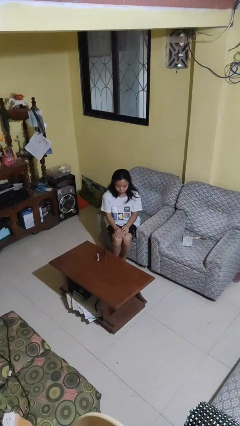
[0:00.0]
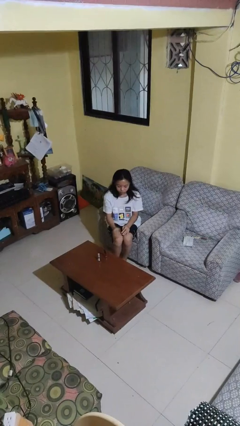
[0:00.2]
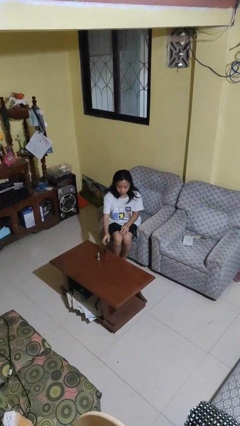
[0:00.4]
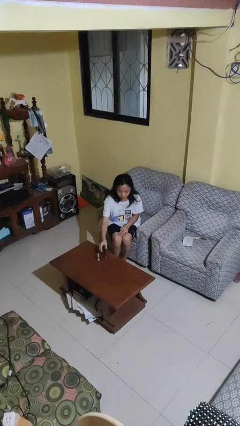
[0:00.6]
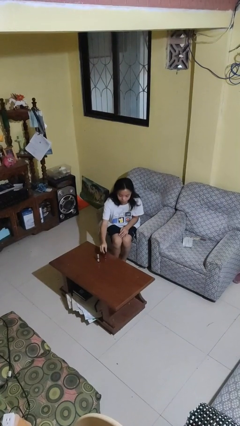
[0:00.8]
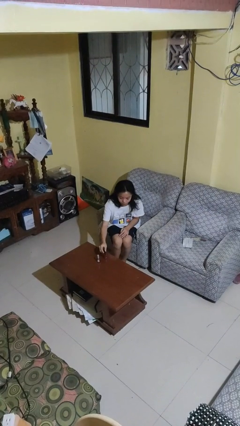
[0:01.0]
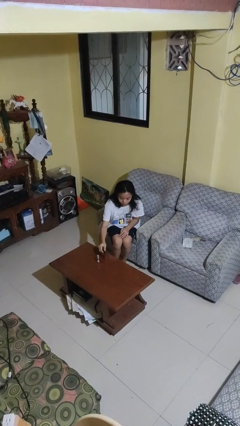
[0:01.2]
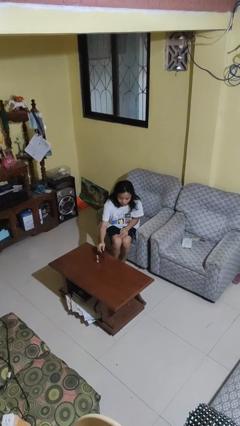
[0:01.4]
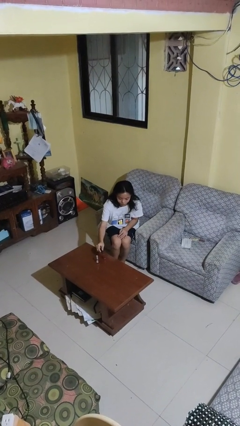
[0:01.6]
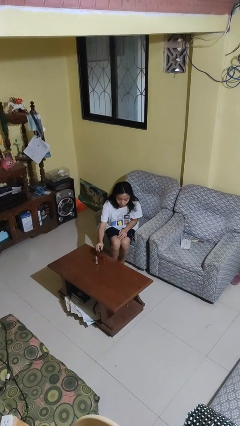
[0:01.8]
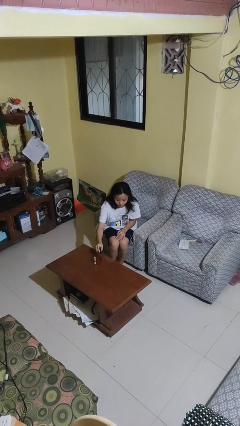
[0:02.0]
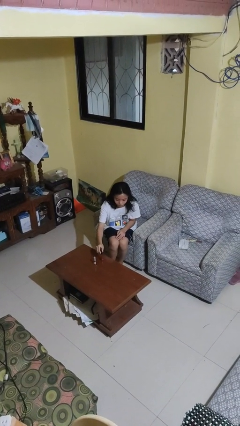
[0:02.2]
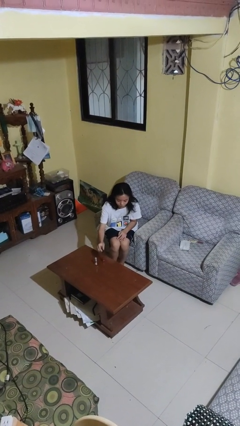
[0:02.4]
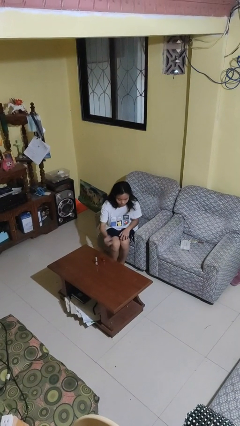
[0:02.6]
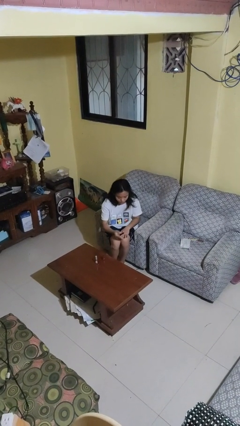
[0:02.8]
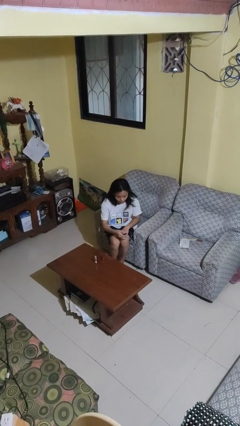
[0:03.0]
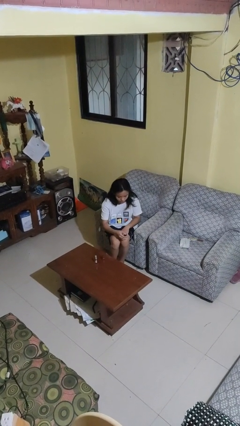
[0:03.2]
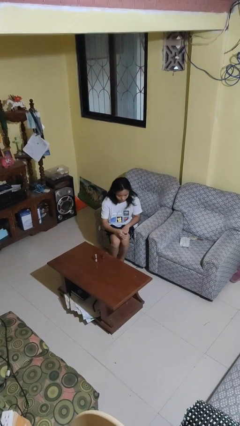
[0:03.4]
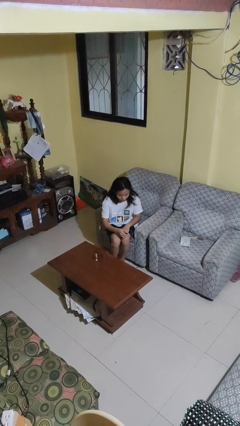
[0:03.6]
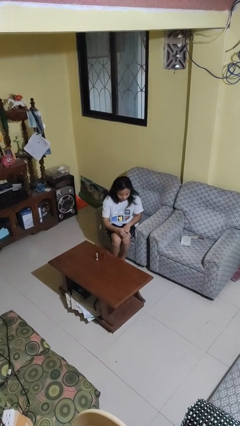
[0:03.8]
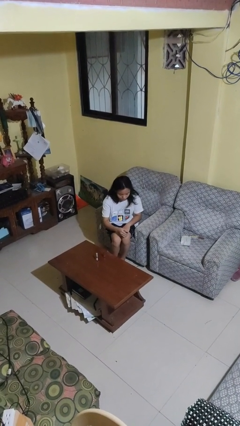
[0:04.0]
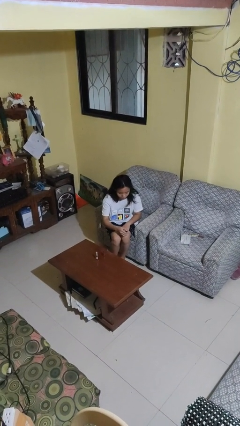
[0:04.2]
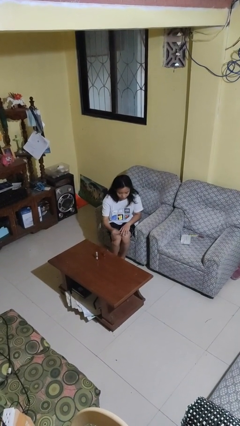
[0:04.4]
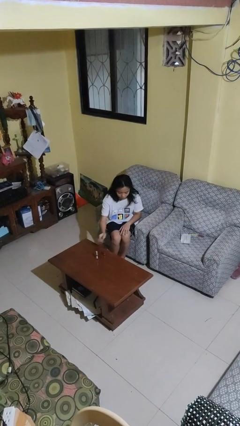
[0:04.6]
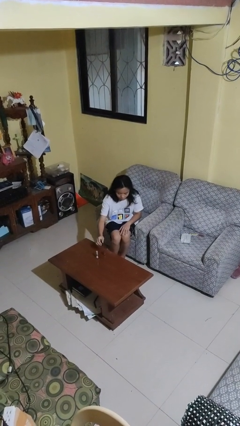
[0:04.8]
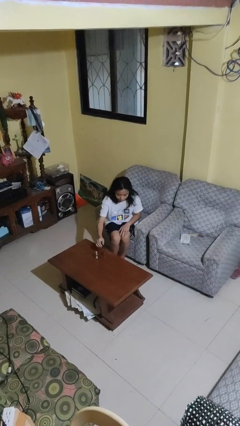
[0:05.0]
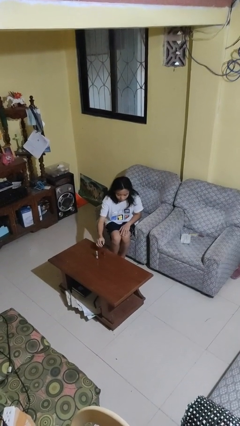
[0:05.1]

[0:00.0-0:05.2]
person paints fingernails

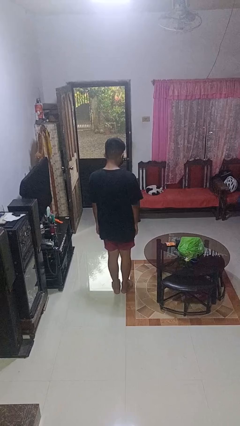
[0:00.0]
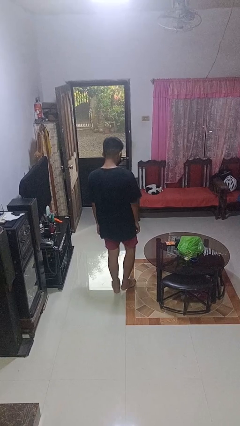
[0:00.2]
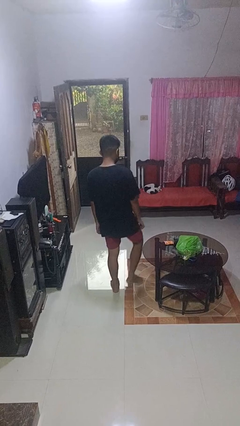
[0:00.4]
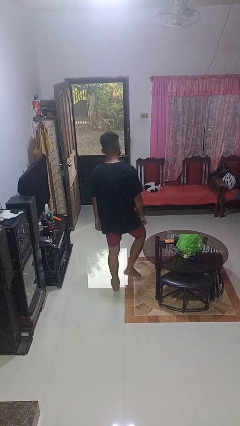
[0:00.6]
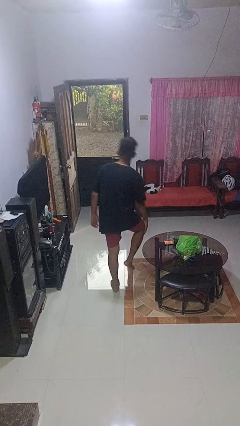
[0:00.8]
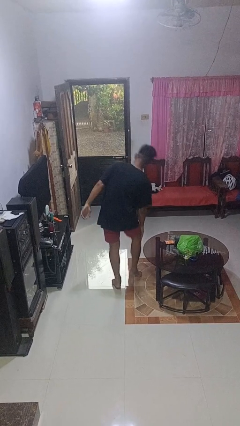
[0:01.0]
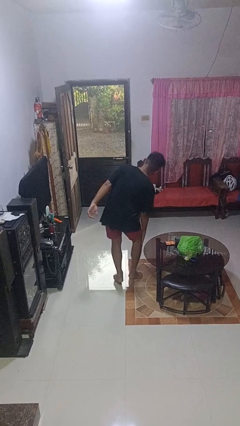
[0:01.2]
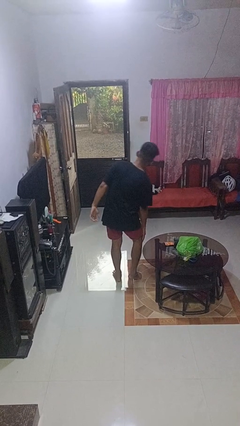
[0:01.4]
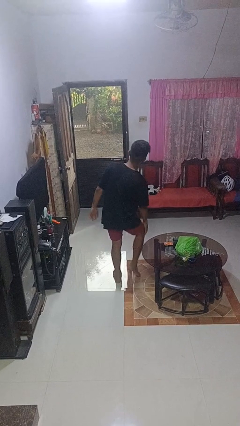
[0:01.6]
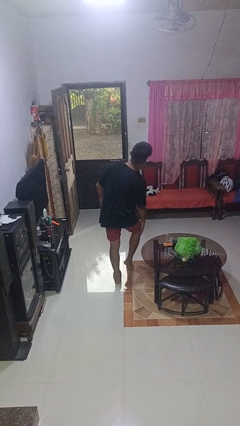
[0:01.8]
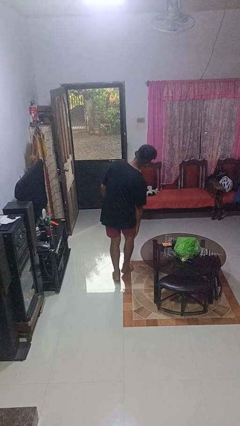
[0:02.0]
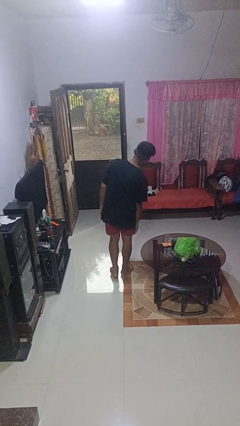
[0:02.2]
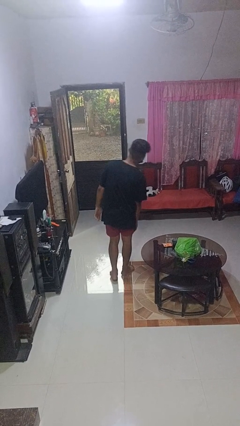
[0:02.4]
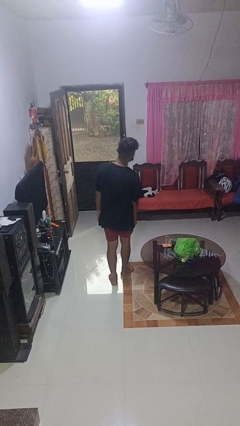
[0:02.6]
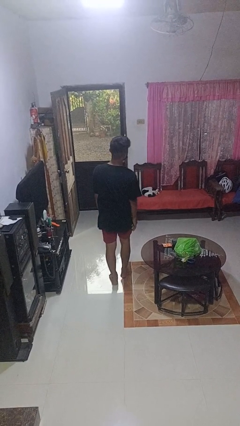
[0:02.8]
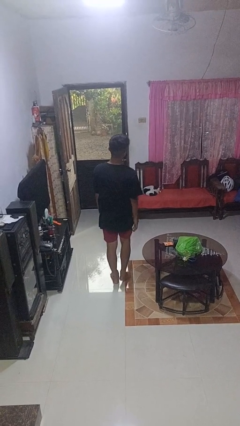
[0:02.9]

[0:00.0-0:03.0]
person bumps into table

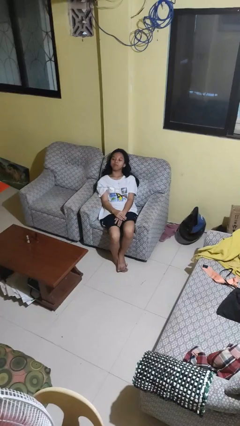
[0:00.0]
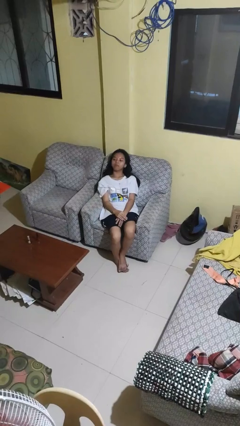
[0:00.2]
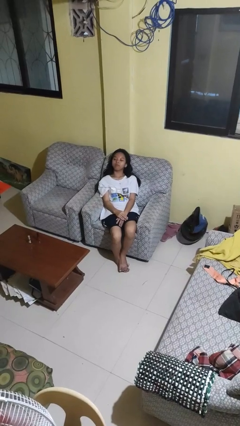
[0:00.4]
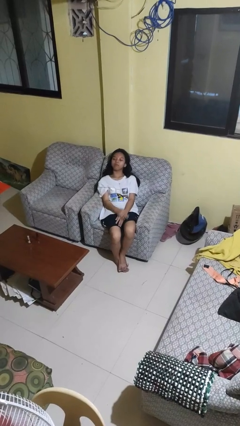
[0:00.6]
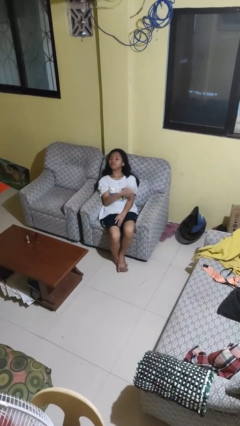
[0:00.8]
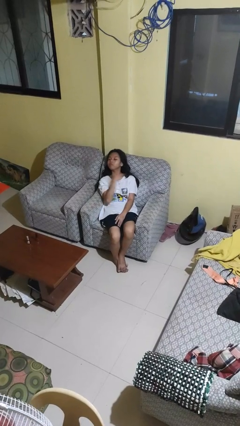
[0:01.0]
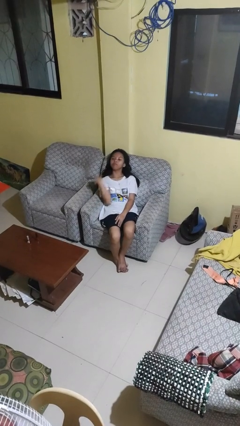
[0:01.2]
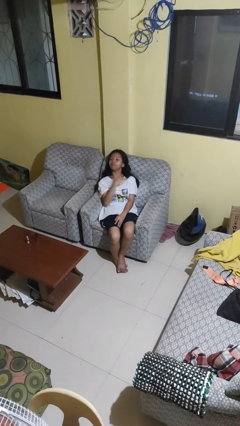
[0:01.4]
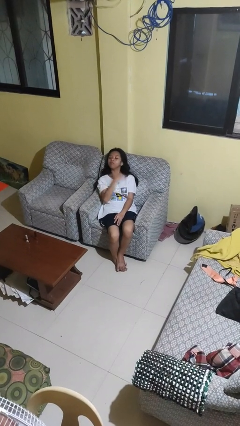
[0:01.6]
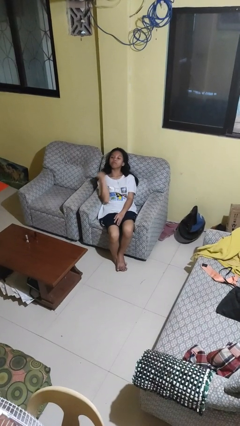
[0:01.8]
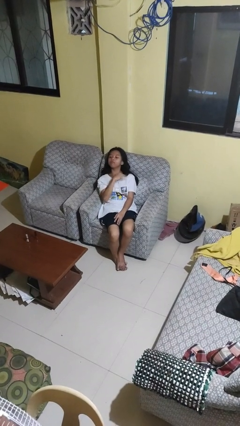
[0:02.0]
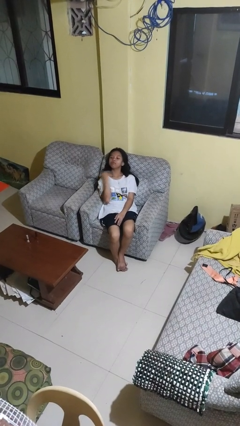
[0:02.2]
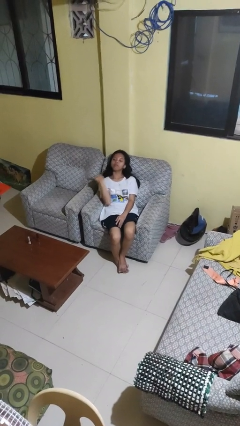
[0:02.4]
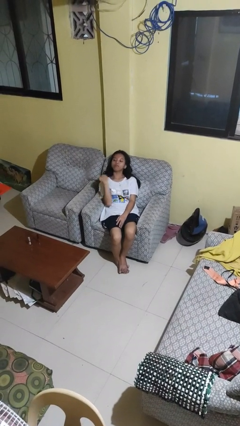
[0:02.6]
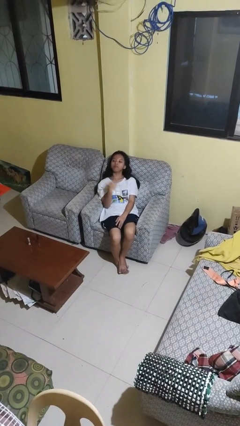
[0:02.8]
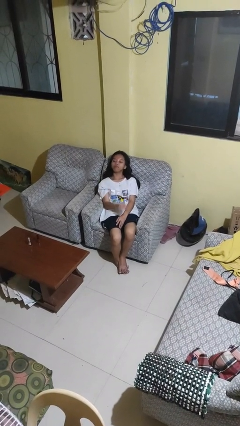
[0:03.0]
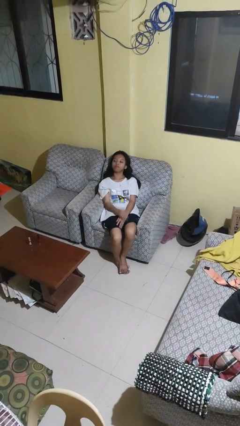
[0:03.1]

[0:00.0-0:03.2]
person gestures cut

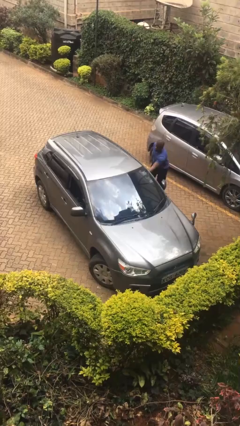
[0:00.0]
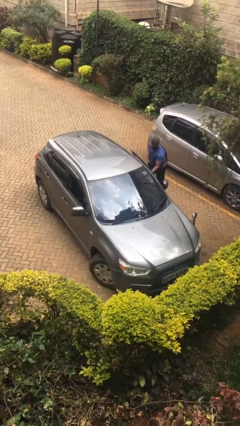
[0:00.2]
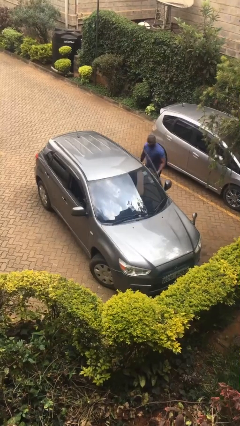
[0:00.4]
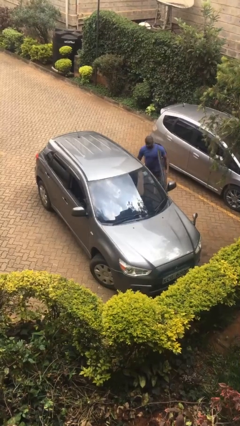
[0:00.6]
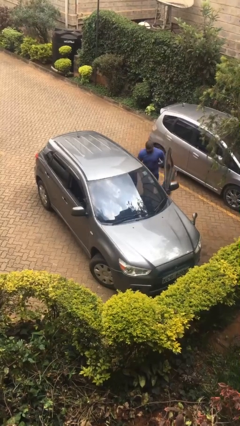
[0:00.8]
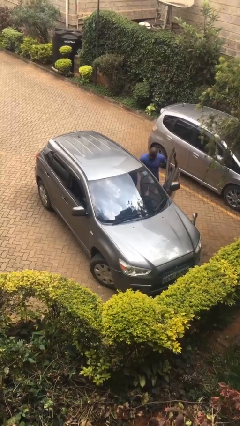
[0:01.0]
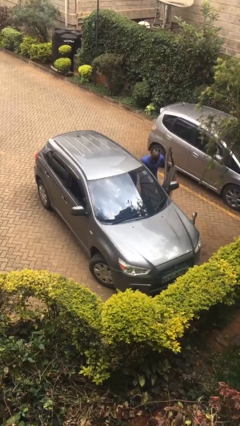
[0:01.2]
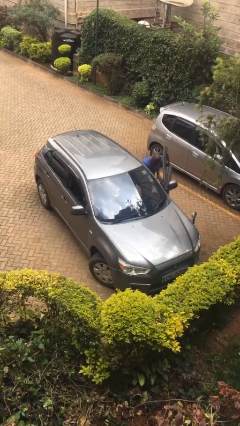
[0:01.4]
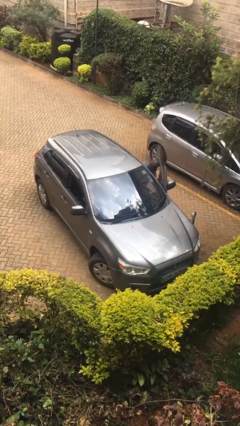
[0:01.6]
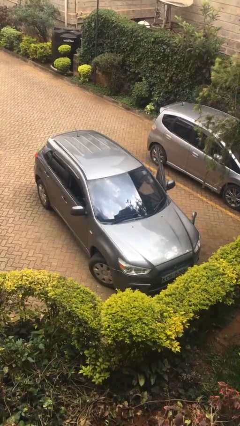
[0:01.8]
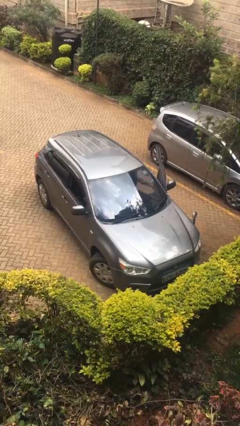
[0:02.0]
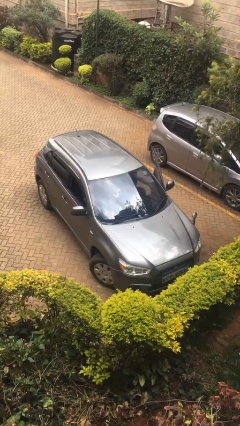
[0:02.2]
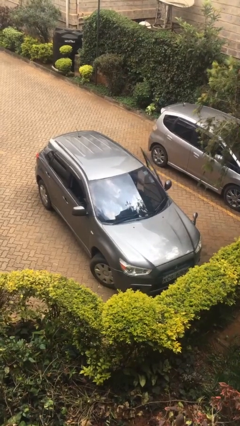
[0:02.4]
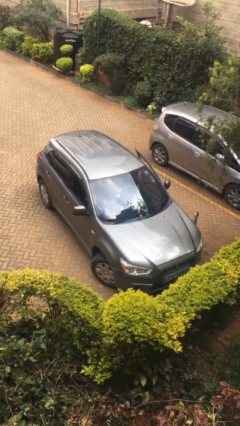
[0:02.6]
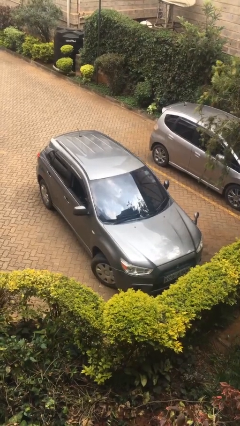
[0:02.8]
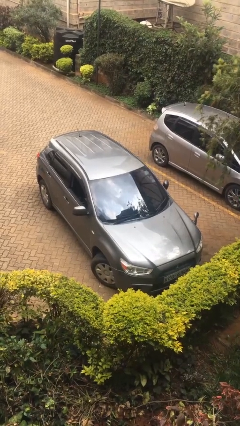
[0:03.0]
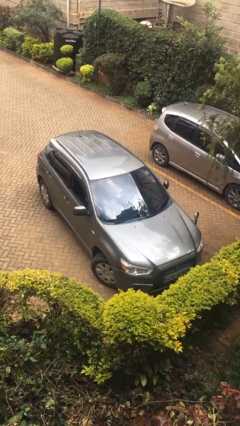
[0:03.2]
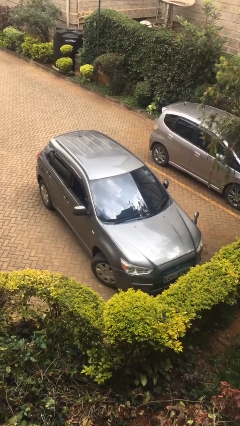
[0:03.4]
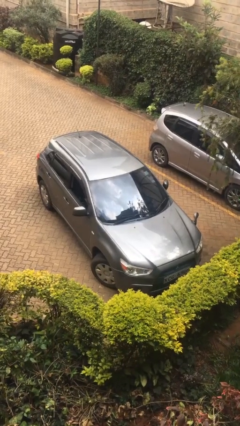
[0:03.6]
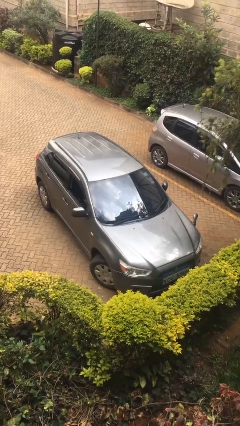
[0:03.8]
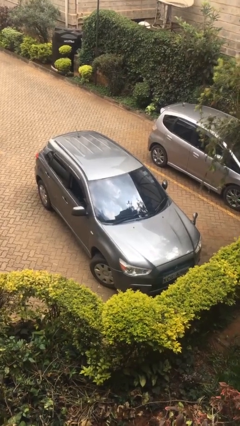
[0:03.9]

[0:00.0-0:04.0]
car picks up person

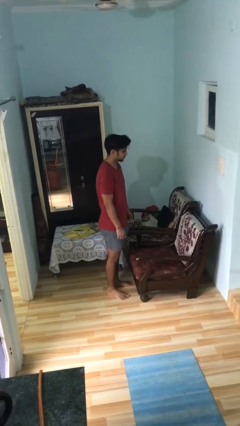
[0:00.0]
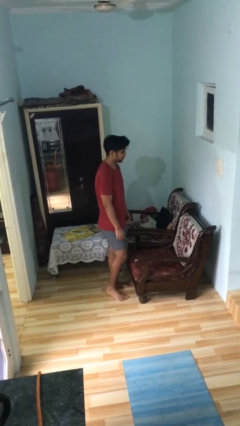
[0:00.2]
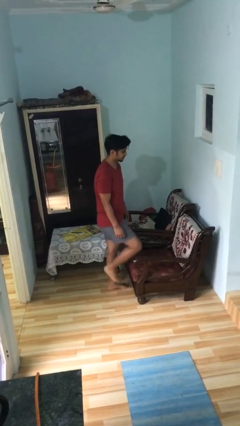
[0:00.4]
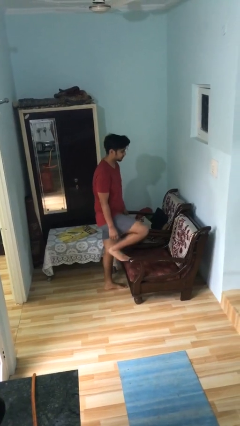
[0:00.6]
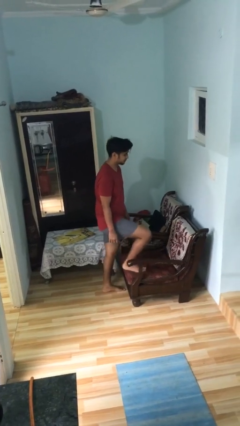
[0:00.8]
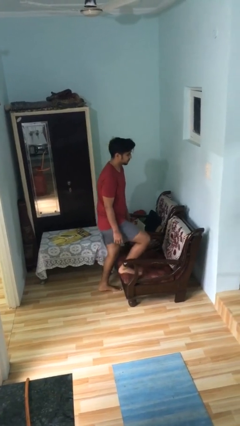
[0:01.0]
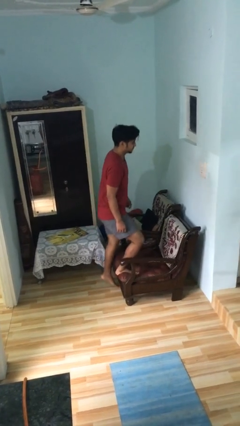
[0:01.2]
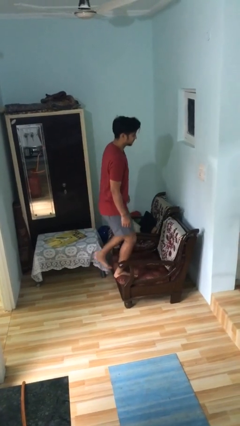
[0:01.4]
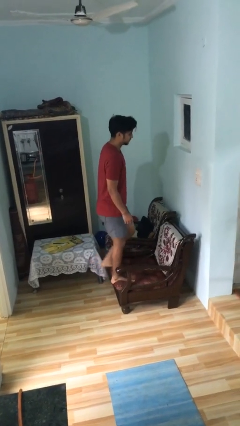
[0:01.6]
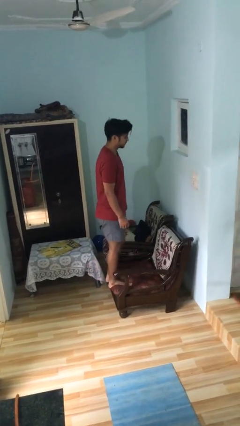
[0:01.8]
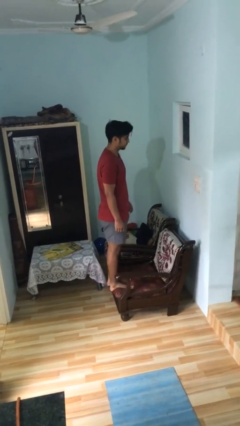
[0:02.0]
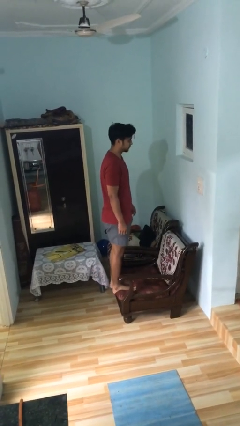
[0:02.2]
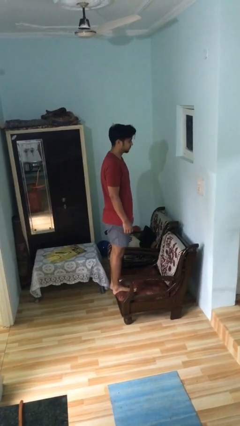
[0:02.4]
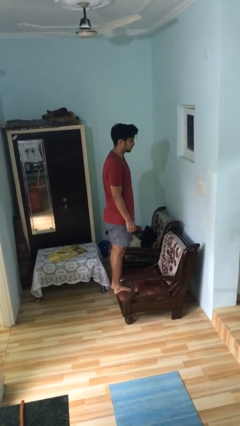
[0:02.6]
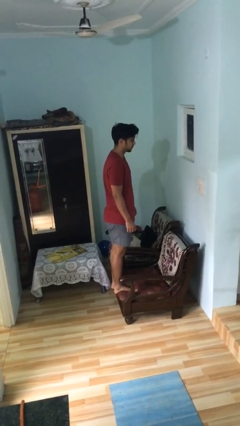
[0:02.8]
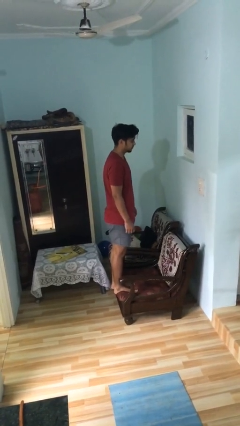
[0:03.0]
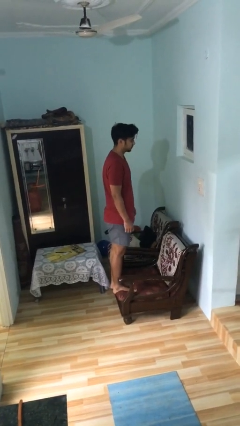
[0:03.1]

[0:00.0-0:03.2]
person climbs on couch
